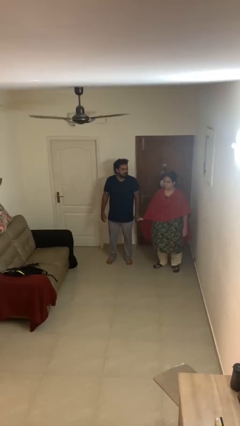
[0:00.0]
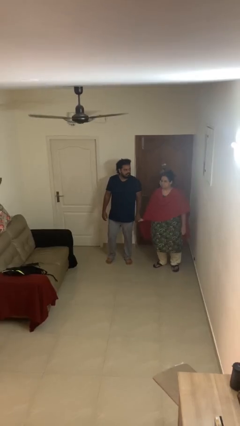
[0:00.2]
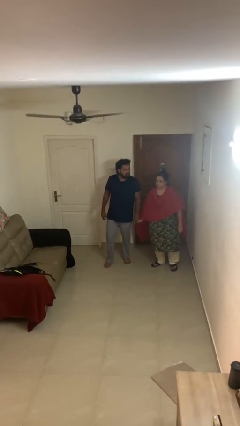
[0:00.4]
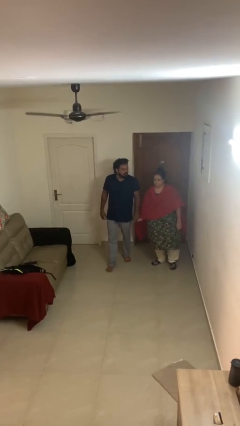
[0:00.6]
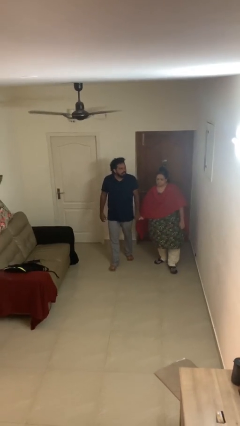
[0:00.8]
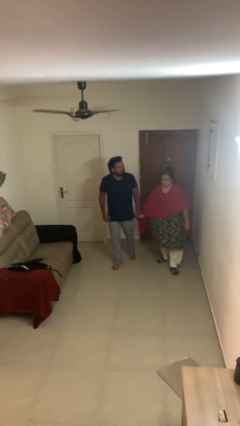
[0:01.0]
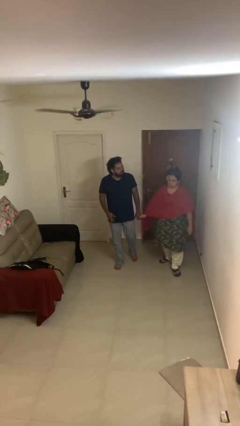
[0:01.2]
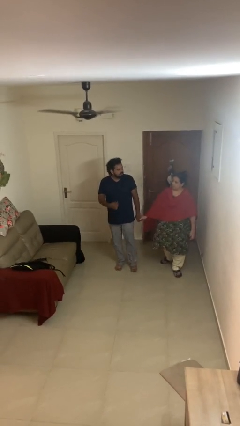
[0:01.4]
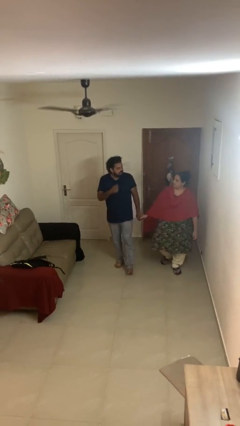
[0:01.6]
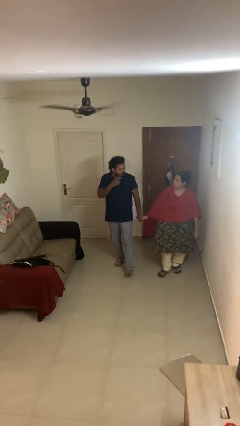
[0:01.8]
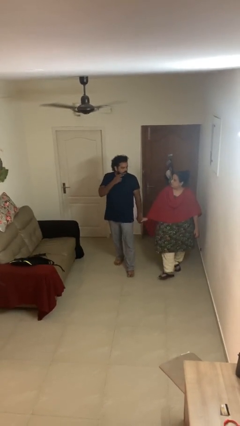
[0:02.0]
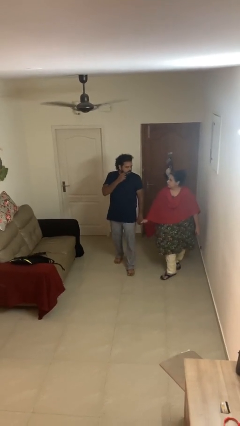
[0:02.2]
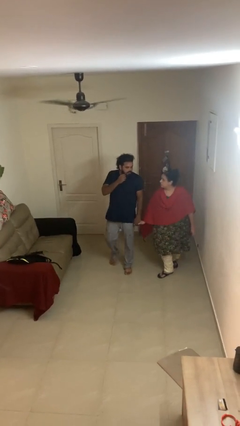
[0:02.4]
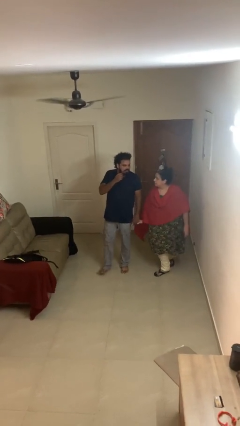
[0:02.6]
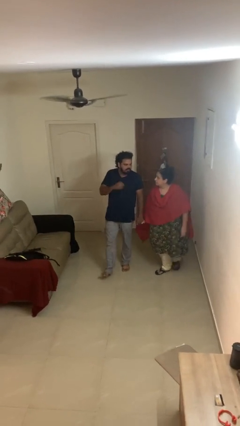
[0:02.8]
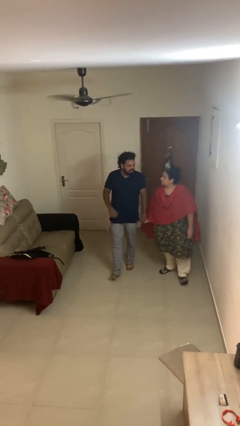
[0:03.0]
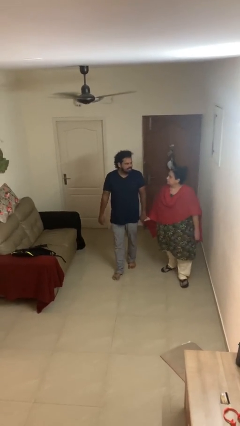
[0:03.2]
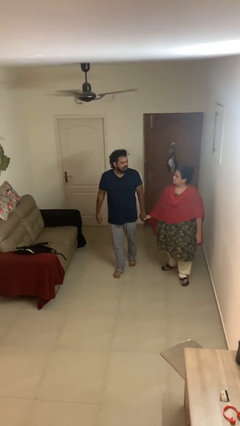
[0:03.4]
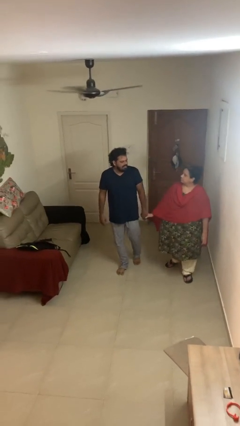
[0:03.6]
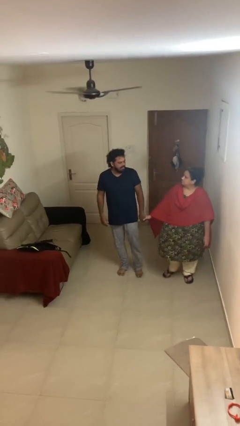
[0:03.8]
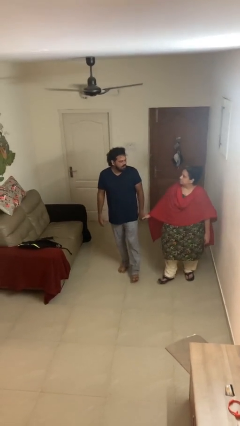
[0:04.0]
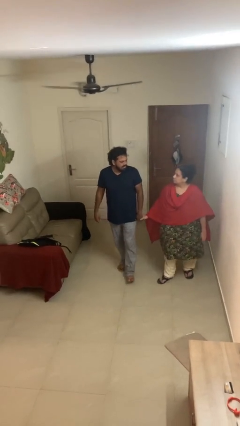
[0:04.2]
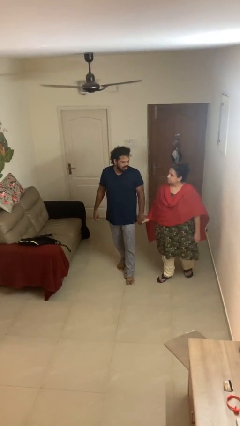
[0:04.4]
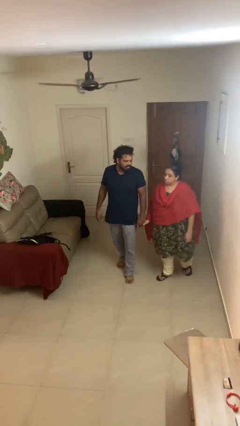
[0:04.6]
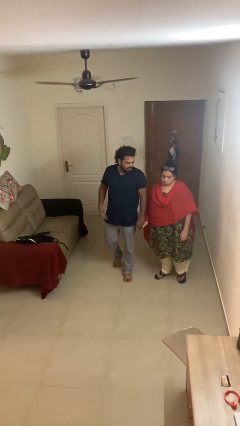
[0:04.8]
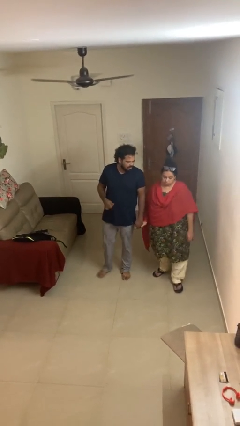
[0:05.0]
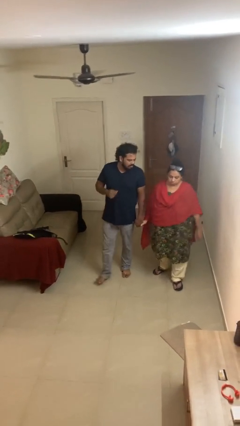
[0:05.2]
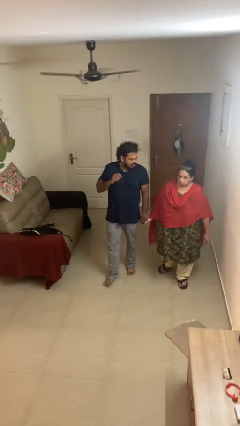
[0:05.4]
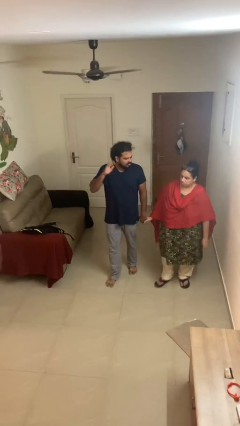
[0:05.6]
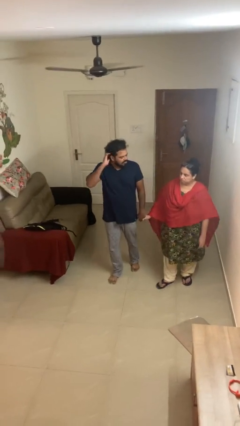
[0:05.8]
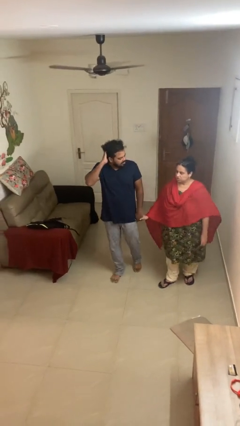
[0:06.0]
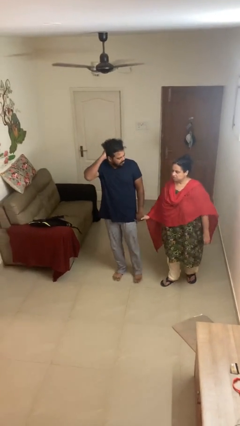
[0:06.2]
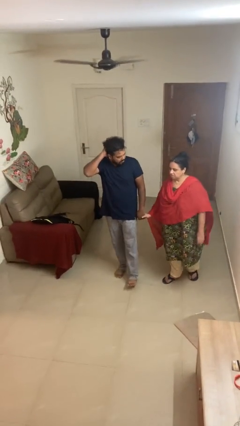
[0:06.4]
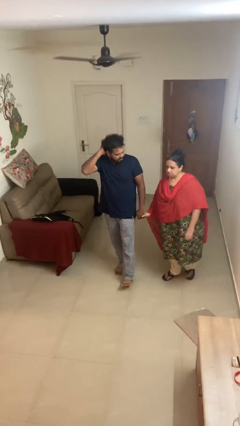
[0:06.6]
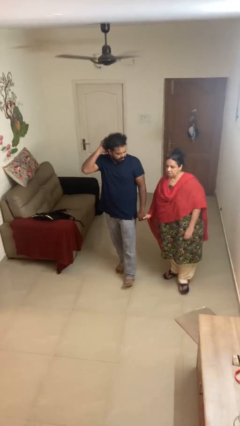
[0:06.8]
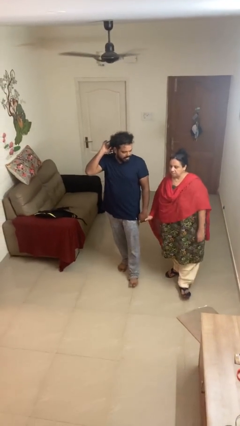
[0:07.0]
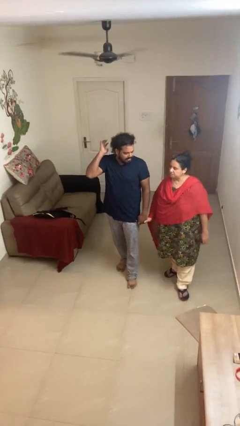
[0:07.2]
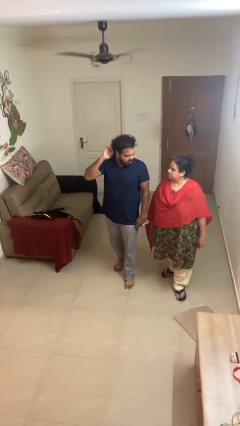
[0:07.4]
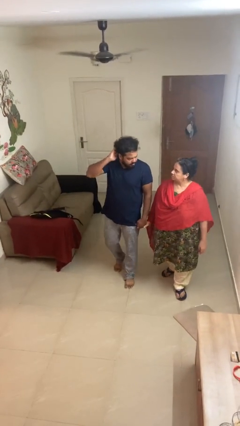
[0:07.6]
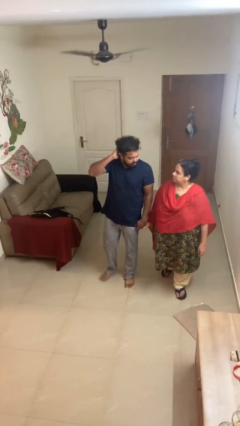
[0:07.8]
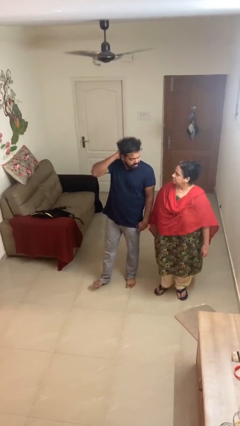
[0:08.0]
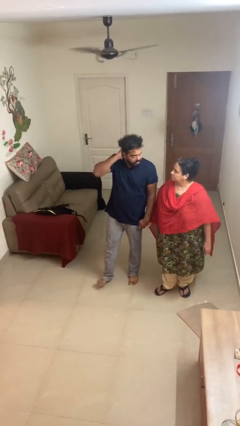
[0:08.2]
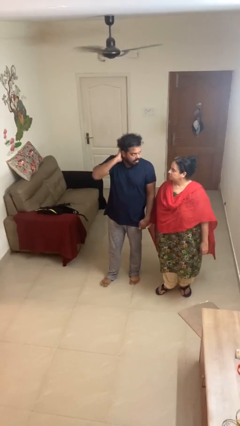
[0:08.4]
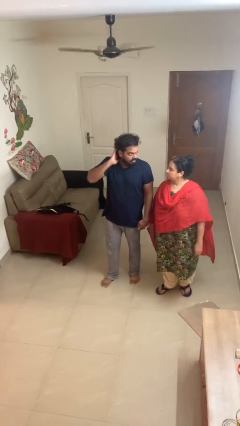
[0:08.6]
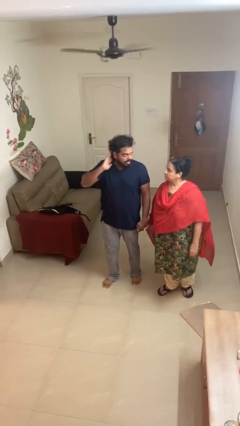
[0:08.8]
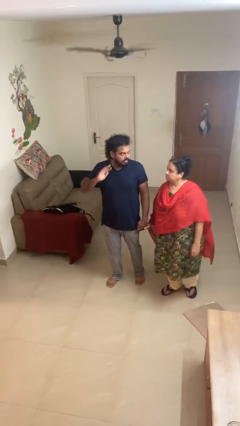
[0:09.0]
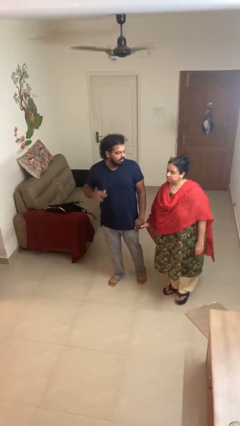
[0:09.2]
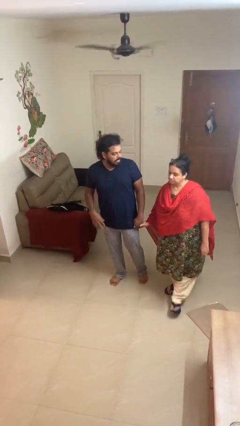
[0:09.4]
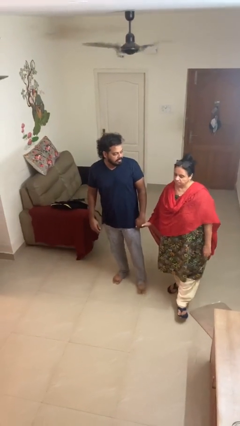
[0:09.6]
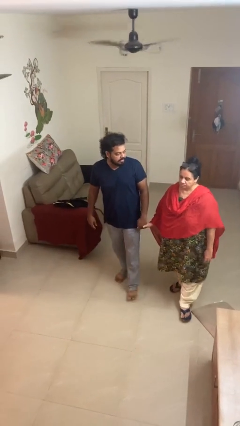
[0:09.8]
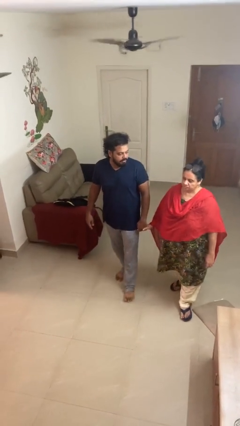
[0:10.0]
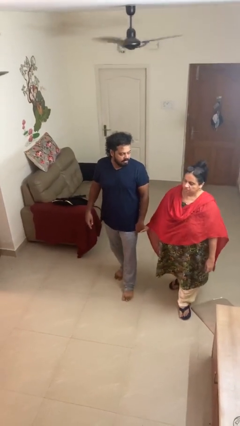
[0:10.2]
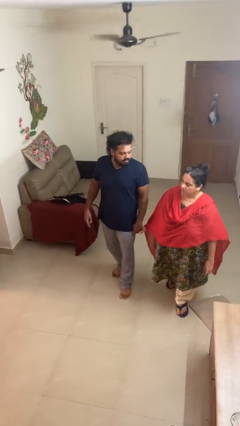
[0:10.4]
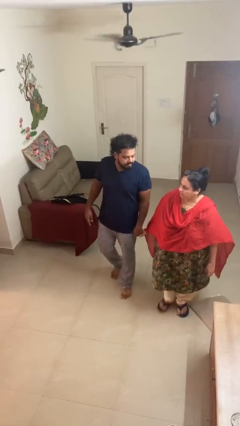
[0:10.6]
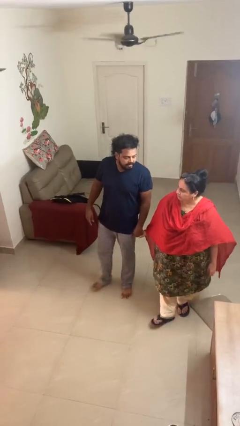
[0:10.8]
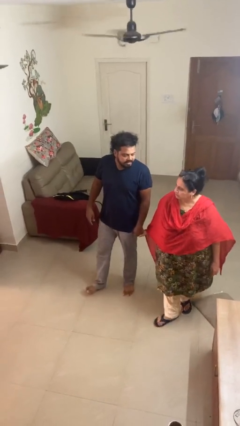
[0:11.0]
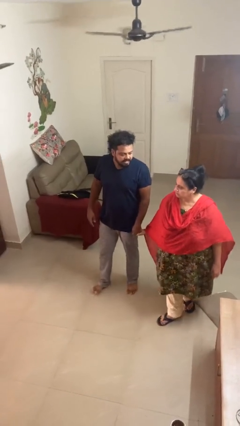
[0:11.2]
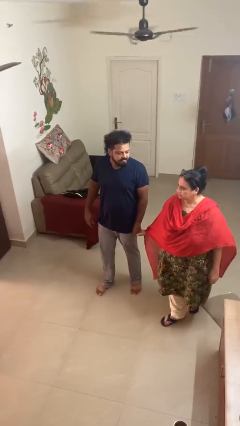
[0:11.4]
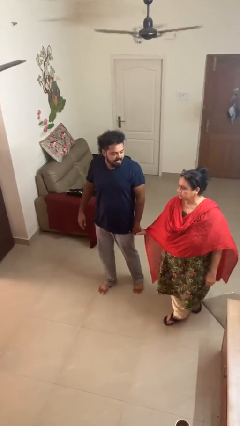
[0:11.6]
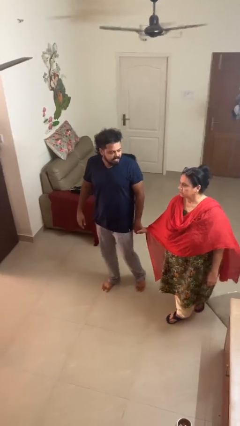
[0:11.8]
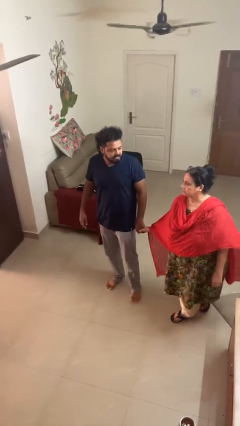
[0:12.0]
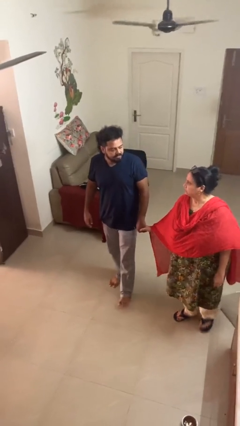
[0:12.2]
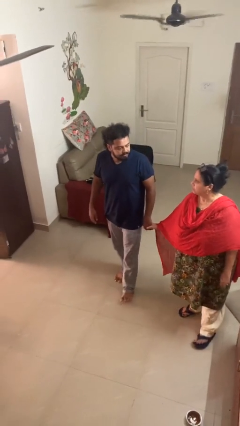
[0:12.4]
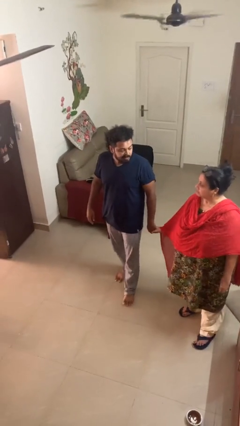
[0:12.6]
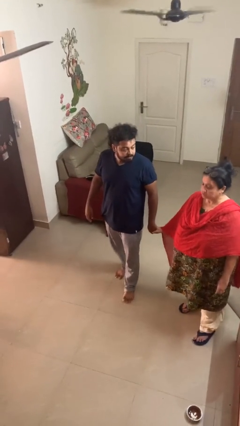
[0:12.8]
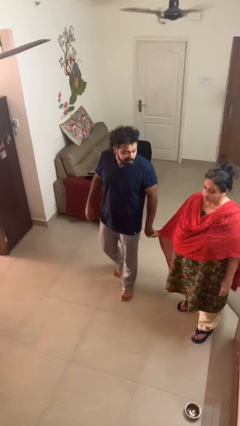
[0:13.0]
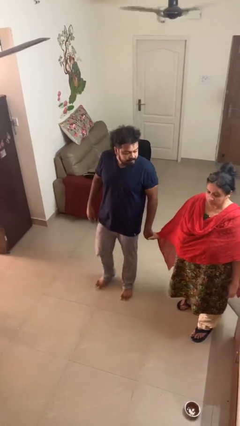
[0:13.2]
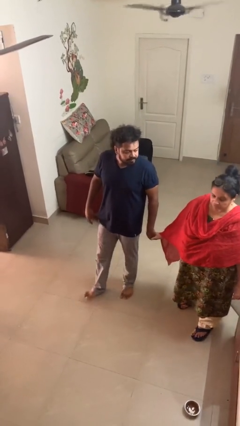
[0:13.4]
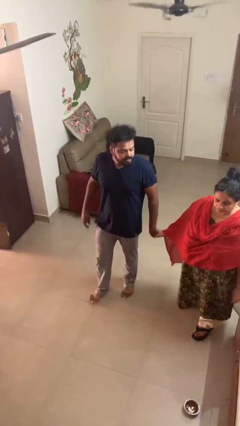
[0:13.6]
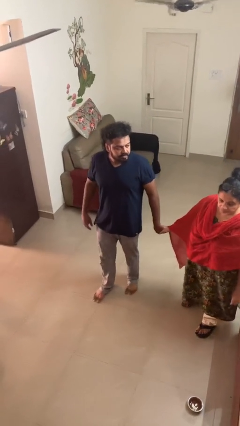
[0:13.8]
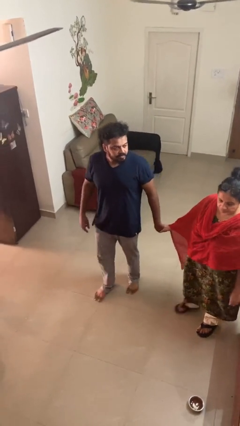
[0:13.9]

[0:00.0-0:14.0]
person holds hand

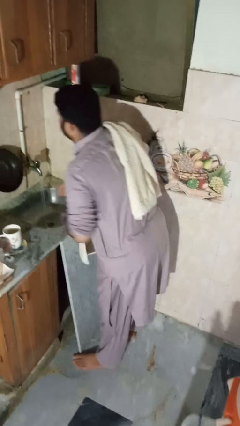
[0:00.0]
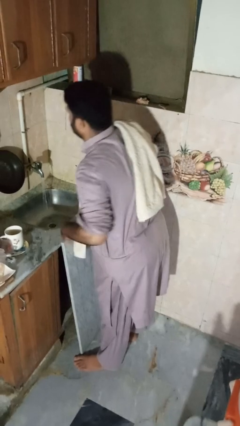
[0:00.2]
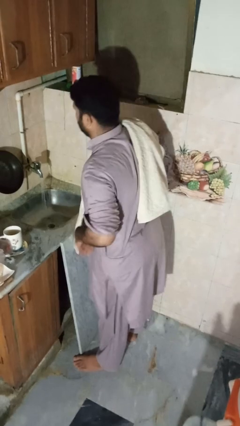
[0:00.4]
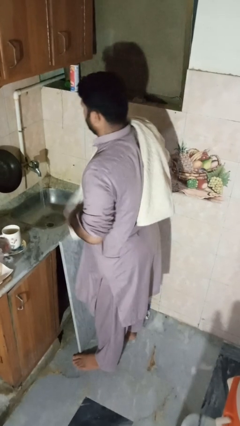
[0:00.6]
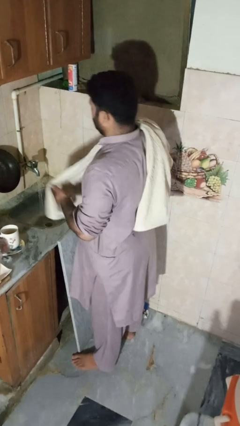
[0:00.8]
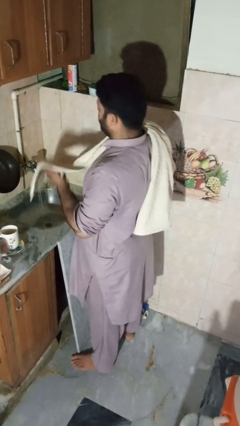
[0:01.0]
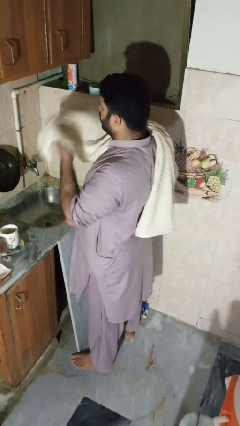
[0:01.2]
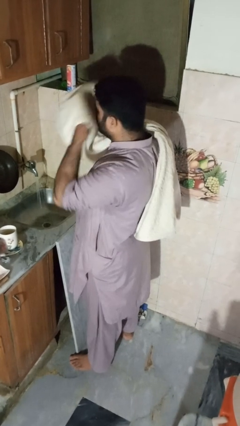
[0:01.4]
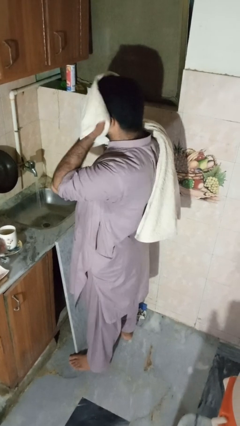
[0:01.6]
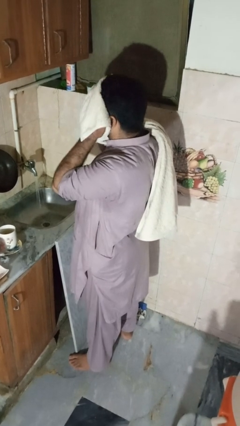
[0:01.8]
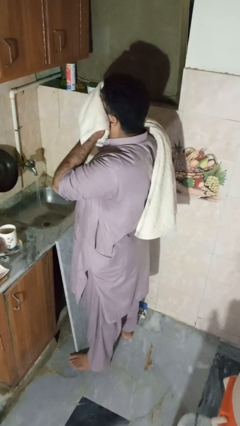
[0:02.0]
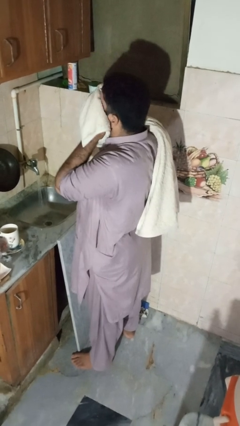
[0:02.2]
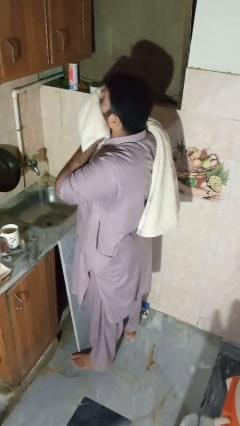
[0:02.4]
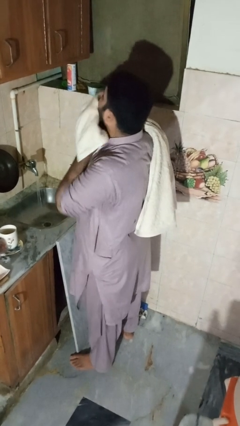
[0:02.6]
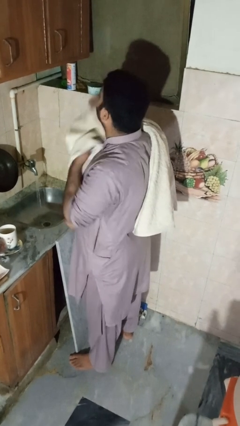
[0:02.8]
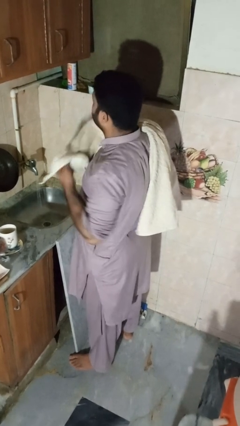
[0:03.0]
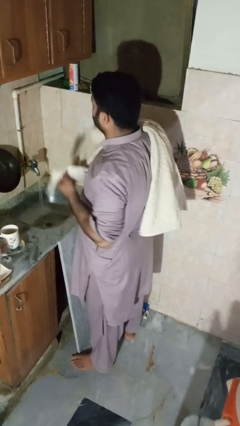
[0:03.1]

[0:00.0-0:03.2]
person dries face with towel

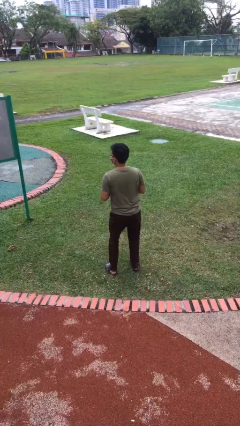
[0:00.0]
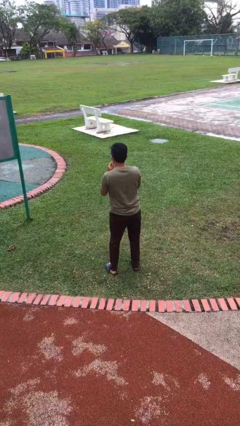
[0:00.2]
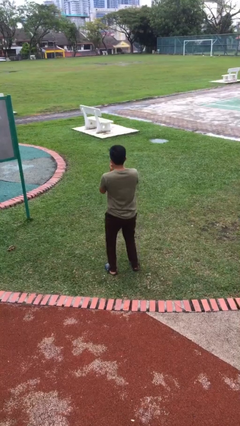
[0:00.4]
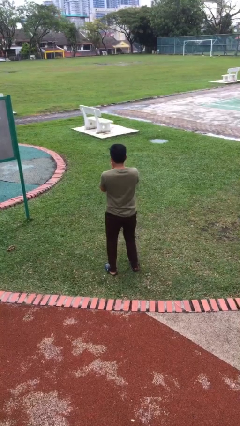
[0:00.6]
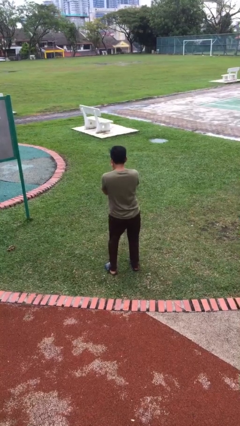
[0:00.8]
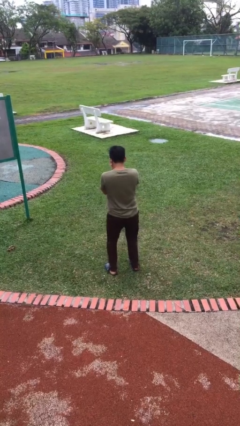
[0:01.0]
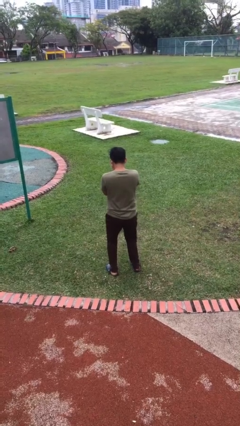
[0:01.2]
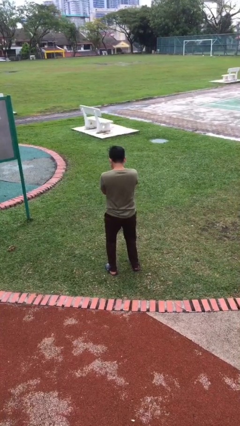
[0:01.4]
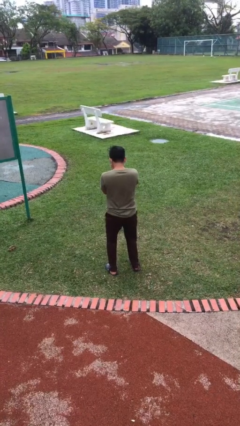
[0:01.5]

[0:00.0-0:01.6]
person wiggles hips
